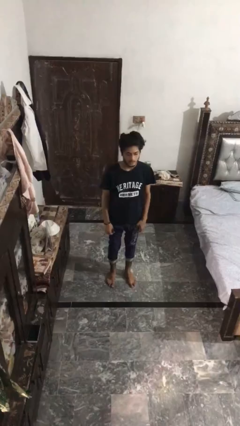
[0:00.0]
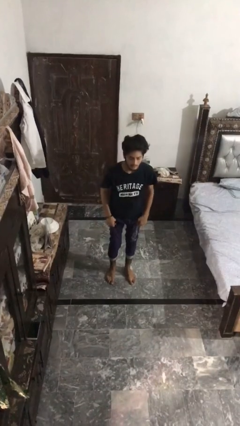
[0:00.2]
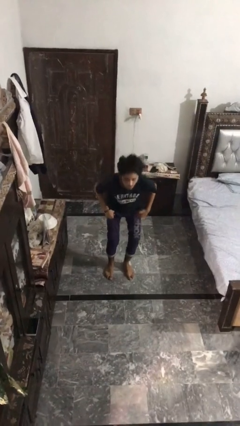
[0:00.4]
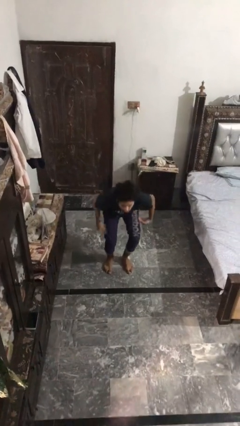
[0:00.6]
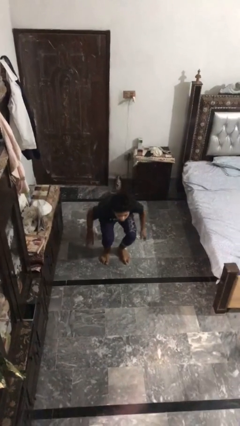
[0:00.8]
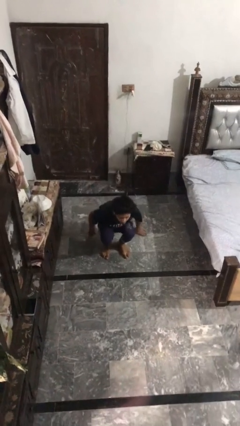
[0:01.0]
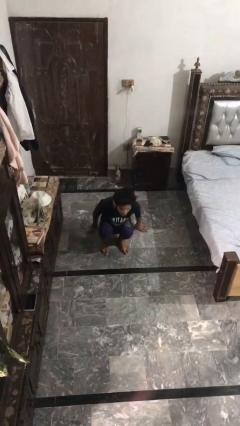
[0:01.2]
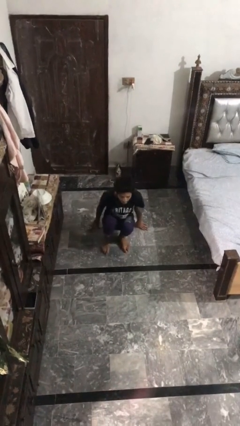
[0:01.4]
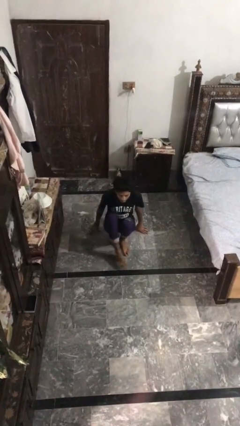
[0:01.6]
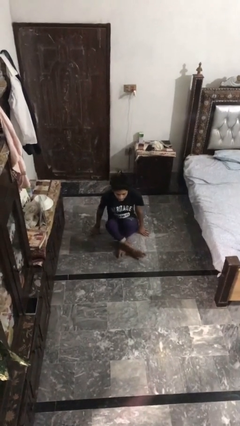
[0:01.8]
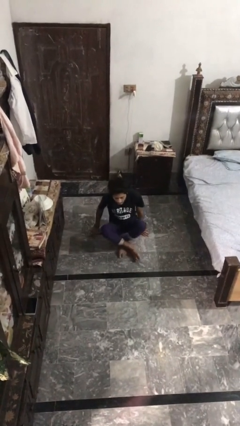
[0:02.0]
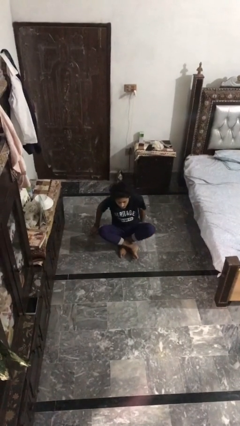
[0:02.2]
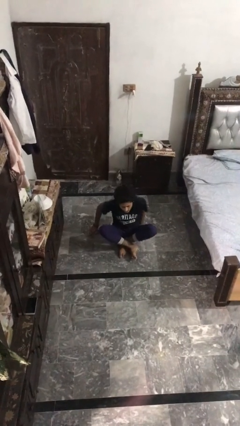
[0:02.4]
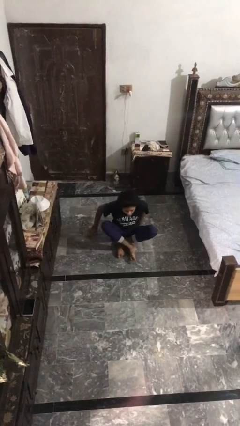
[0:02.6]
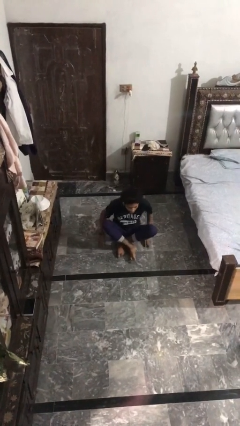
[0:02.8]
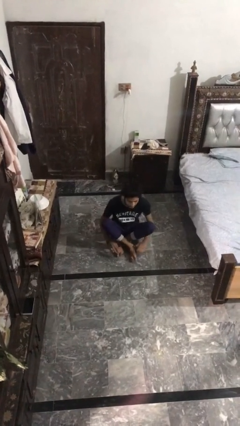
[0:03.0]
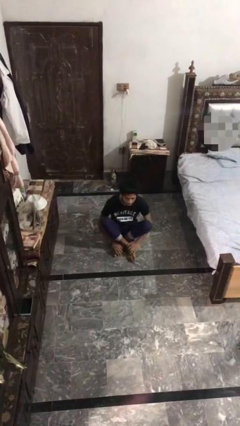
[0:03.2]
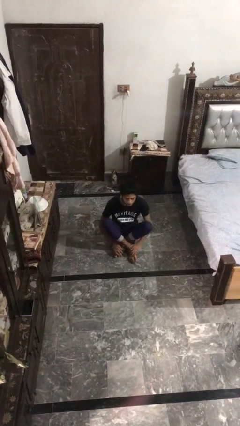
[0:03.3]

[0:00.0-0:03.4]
person sits crisscross

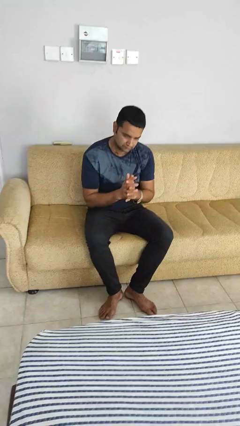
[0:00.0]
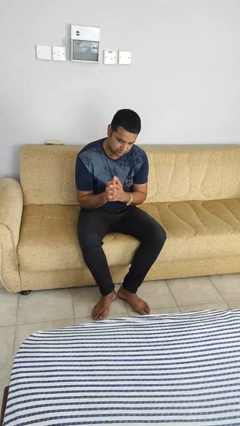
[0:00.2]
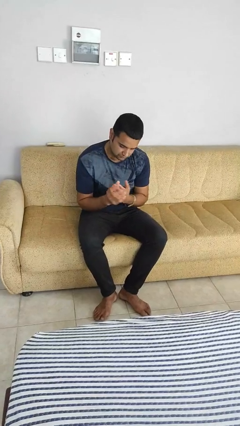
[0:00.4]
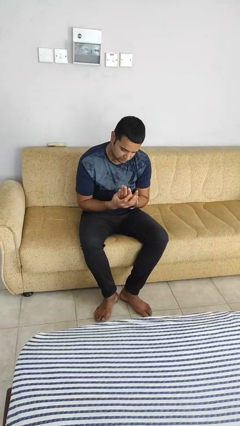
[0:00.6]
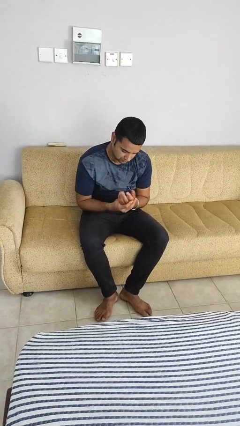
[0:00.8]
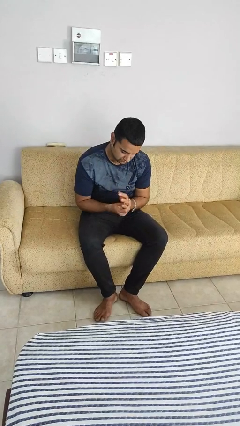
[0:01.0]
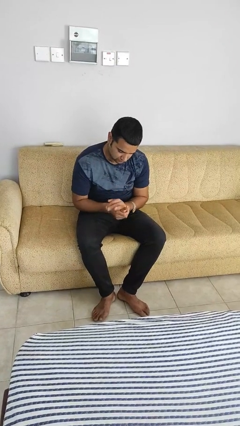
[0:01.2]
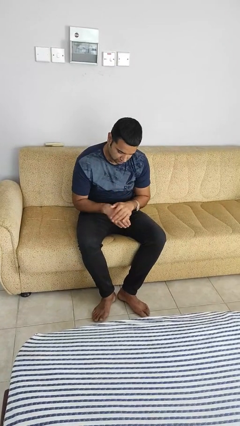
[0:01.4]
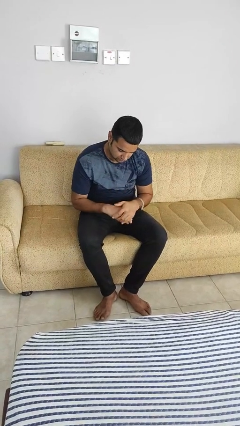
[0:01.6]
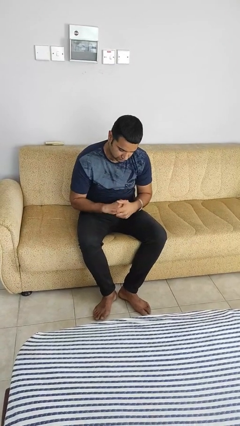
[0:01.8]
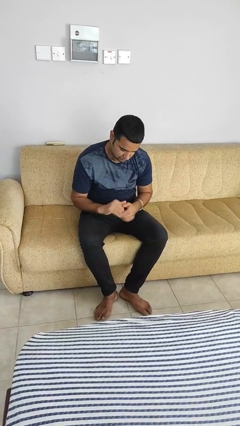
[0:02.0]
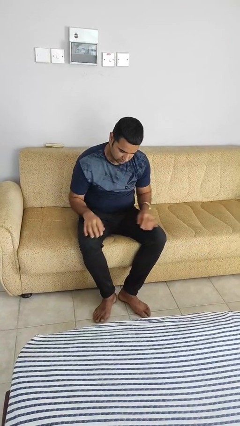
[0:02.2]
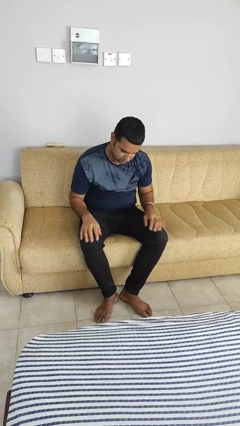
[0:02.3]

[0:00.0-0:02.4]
person looks at hands in lap

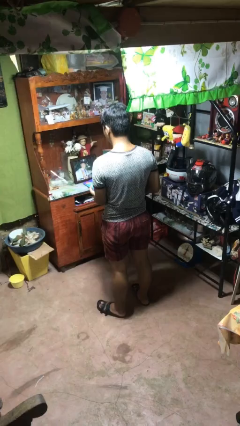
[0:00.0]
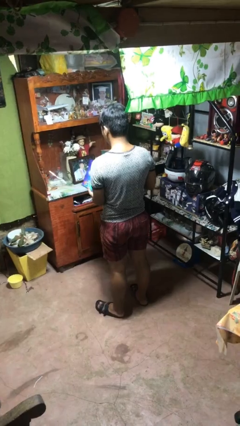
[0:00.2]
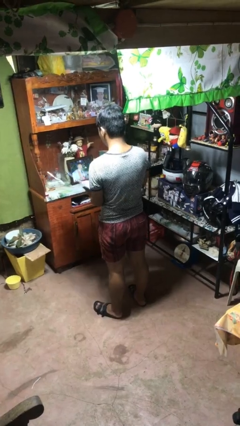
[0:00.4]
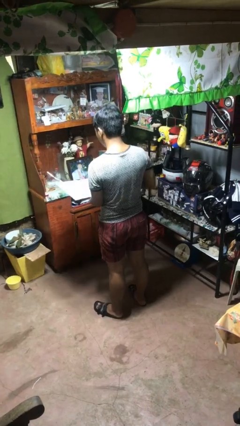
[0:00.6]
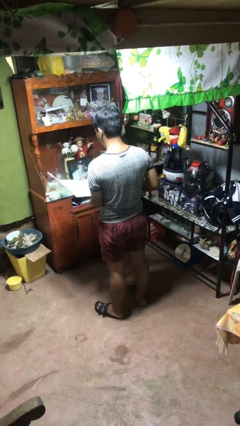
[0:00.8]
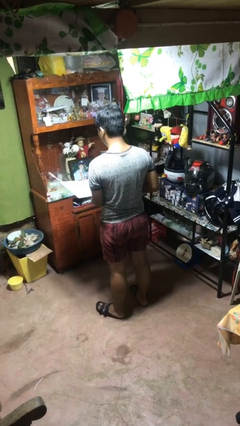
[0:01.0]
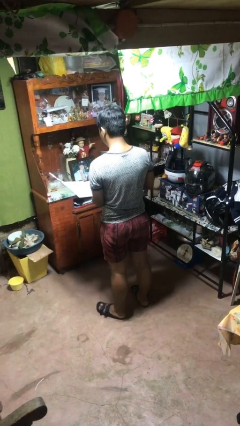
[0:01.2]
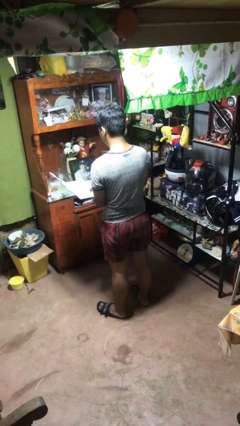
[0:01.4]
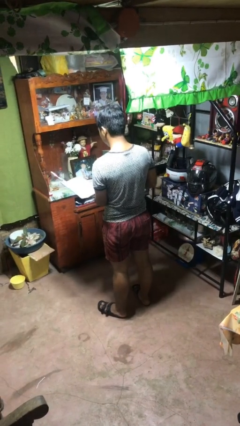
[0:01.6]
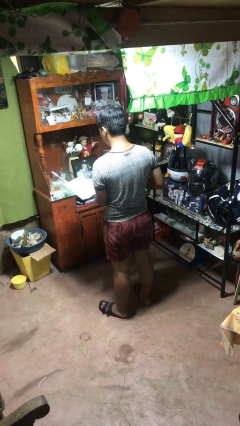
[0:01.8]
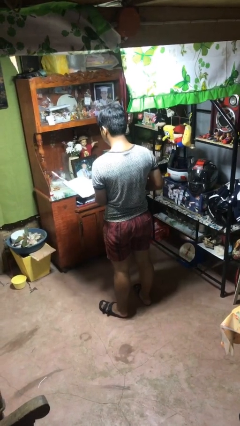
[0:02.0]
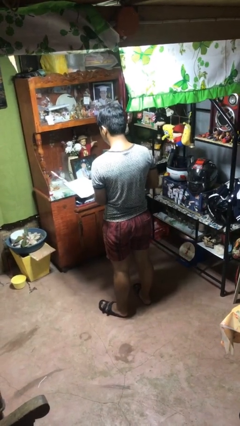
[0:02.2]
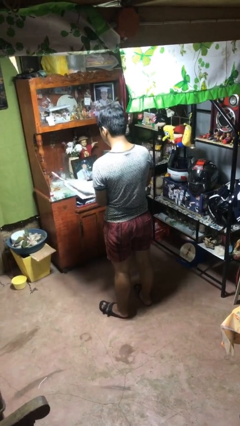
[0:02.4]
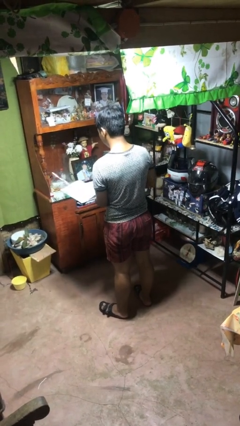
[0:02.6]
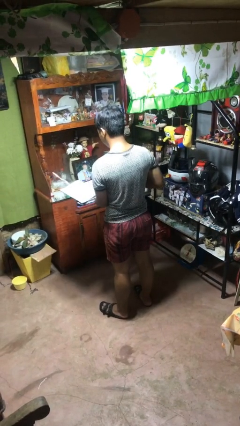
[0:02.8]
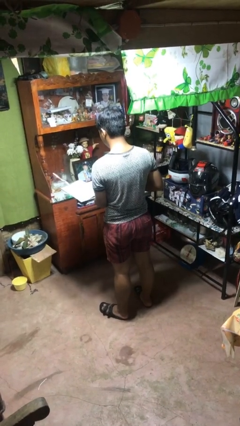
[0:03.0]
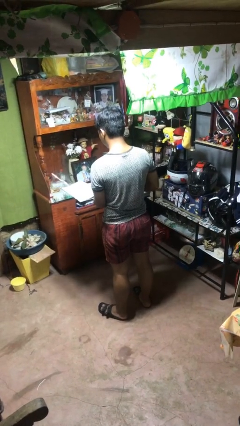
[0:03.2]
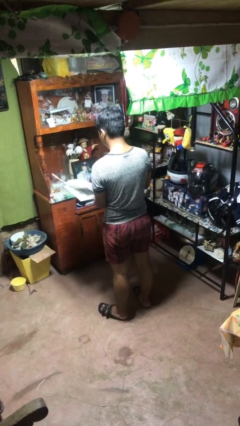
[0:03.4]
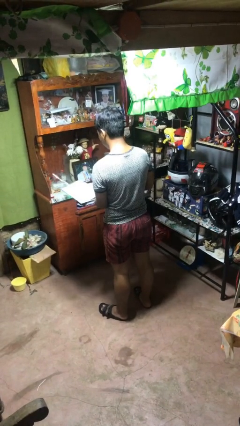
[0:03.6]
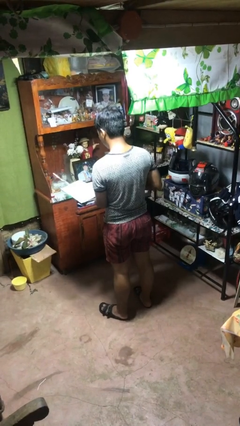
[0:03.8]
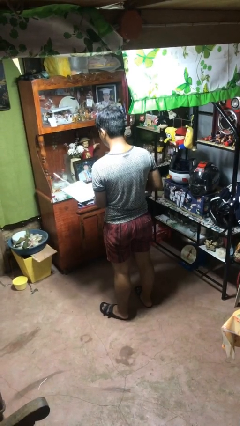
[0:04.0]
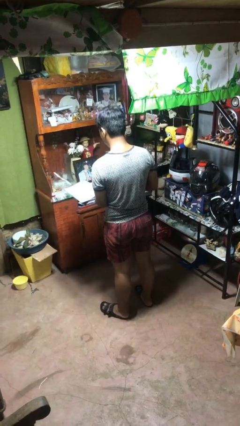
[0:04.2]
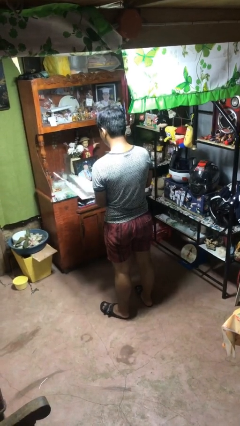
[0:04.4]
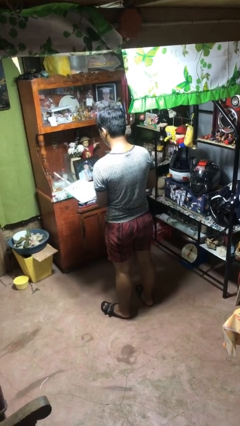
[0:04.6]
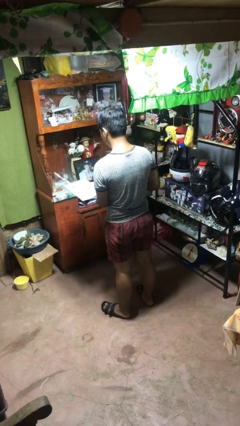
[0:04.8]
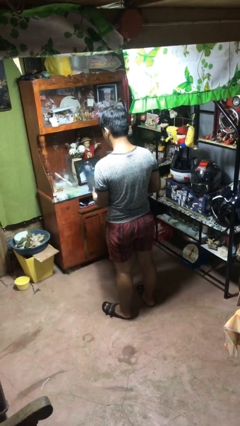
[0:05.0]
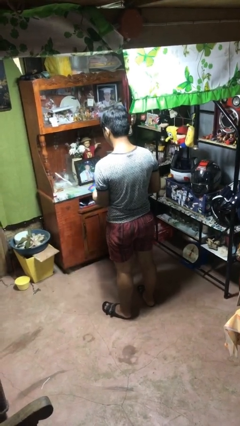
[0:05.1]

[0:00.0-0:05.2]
person reads magazine

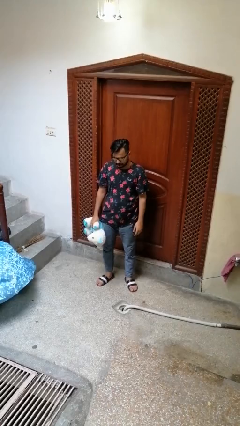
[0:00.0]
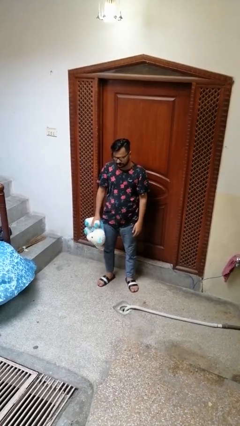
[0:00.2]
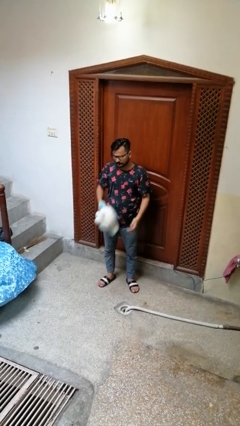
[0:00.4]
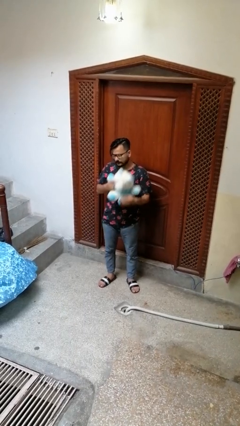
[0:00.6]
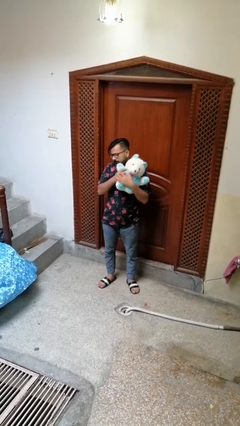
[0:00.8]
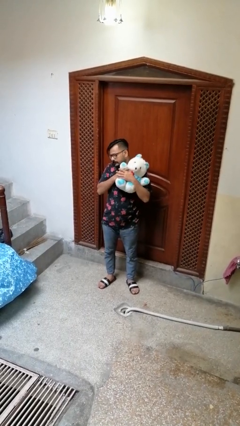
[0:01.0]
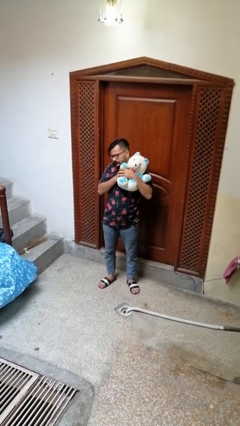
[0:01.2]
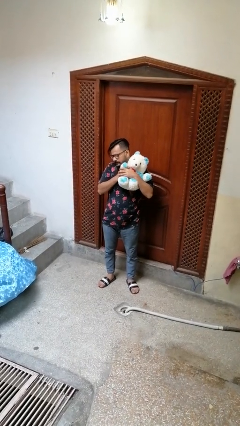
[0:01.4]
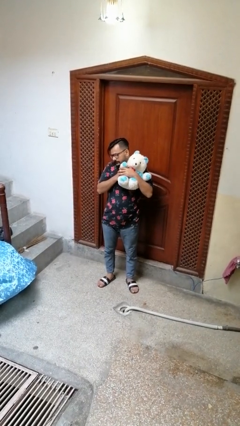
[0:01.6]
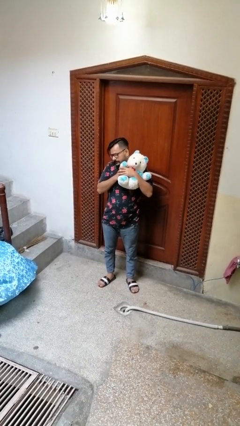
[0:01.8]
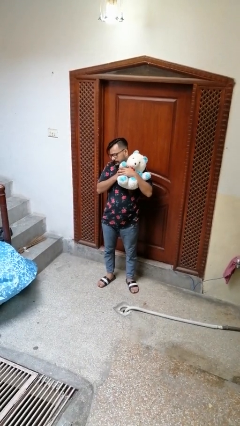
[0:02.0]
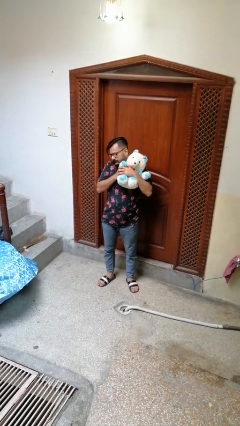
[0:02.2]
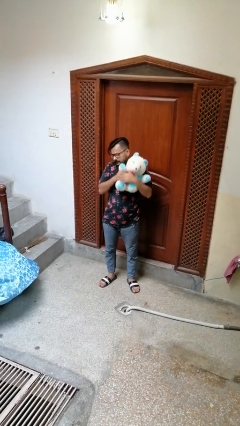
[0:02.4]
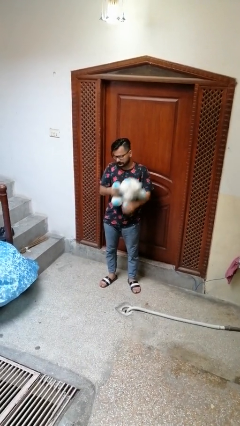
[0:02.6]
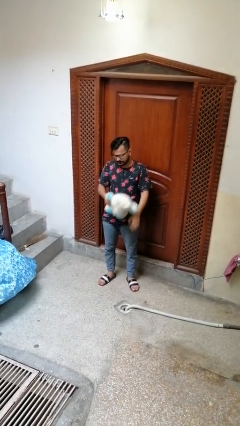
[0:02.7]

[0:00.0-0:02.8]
person hugs stuffed animal

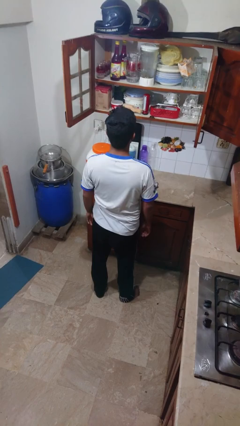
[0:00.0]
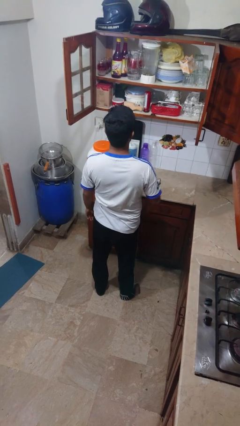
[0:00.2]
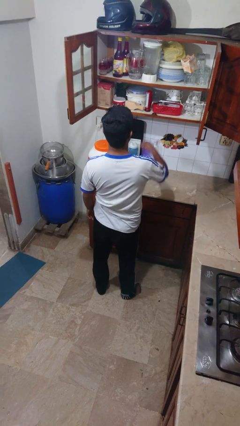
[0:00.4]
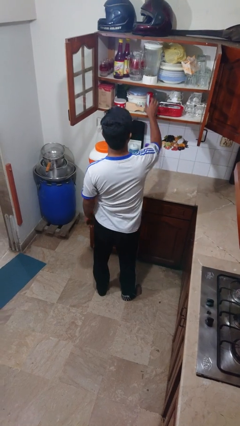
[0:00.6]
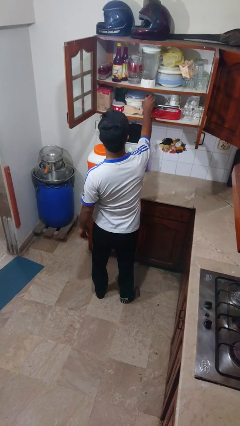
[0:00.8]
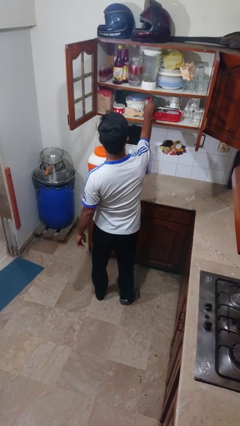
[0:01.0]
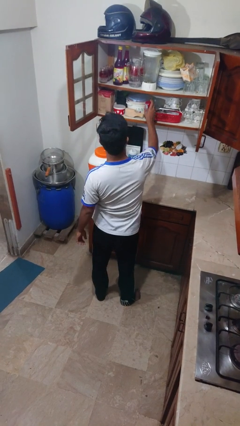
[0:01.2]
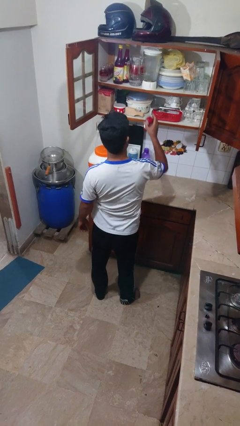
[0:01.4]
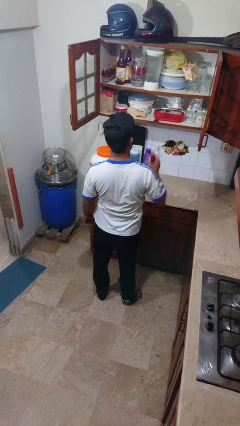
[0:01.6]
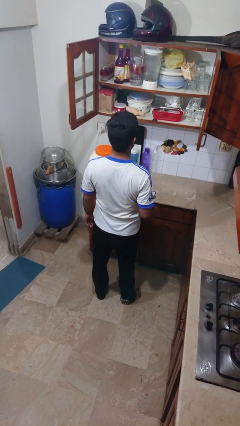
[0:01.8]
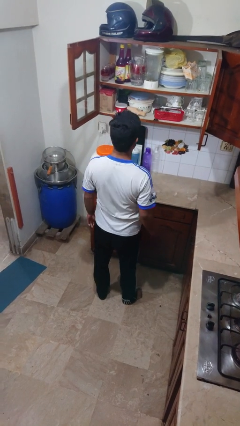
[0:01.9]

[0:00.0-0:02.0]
person picks up object from cabinet

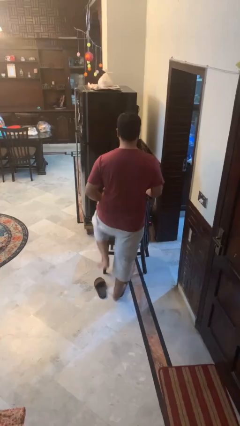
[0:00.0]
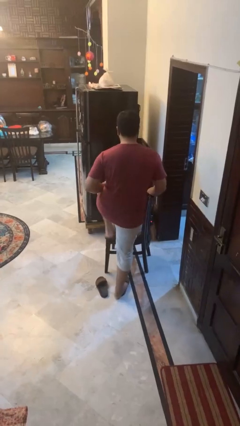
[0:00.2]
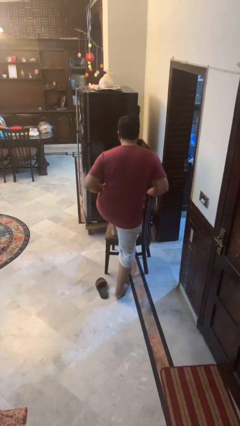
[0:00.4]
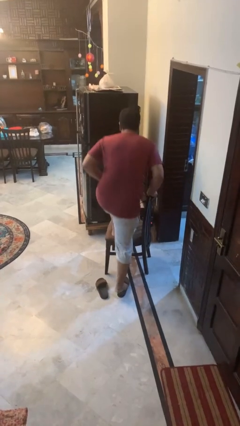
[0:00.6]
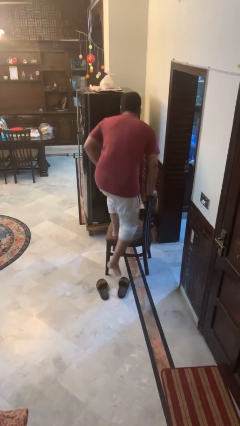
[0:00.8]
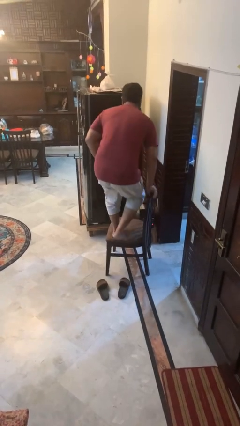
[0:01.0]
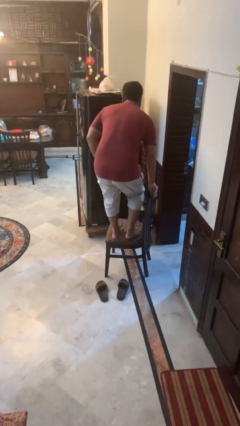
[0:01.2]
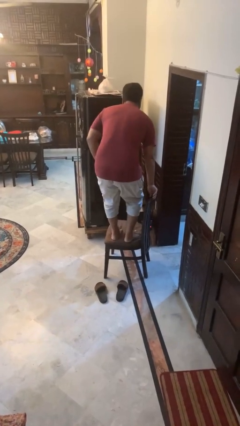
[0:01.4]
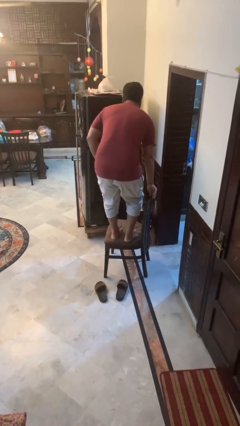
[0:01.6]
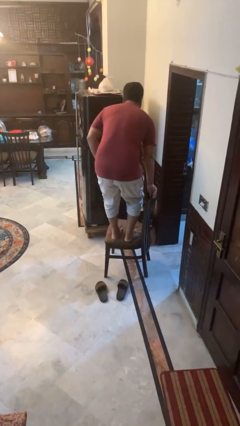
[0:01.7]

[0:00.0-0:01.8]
person climbs on chair
